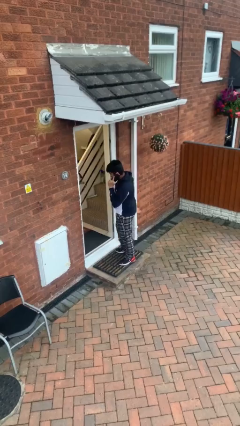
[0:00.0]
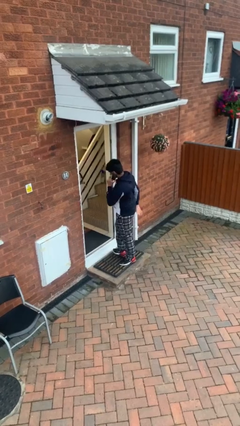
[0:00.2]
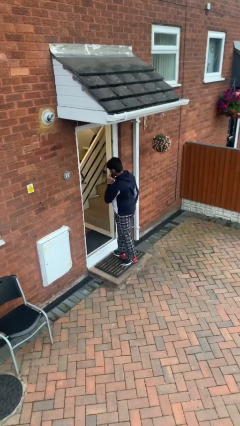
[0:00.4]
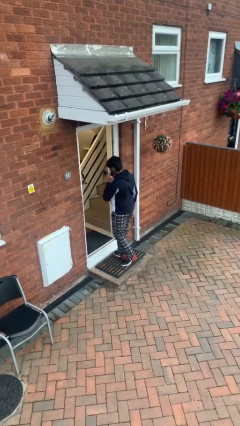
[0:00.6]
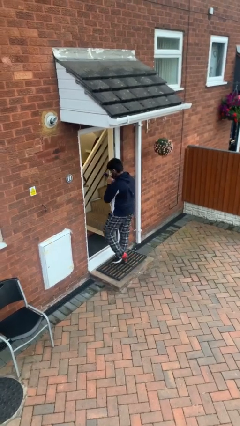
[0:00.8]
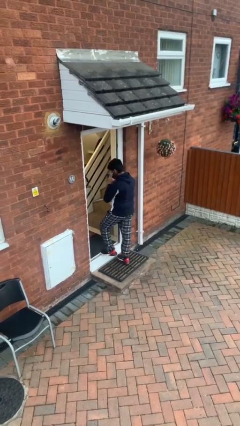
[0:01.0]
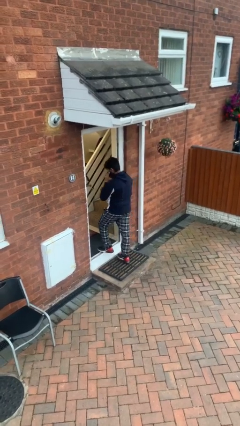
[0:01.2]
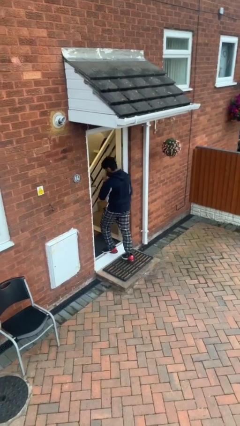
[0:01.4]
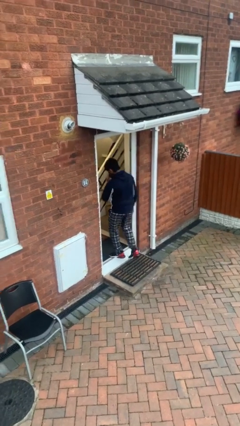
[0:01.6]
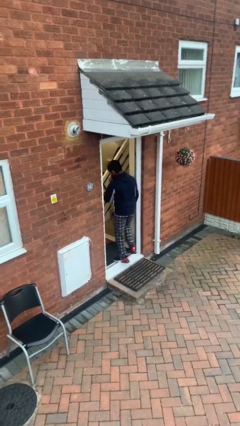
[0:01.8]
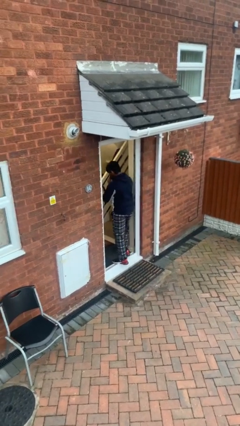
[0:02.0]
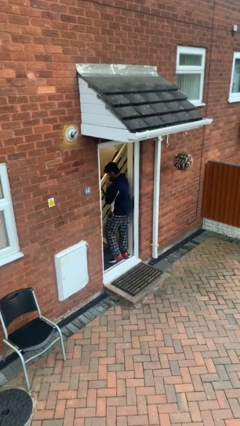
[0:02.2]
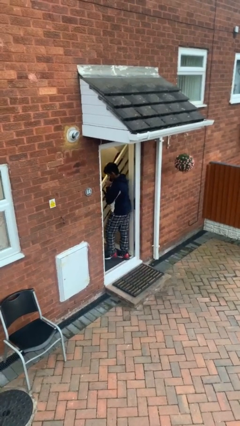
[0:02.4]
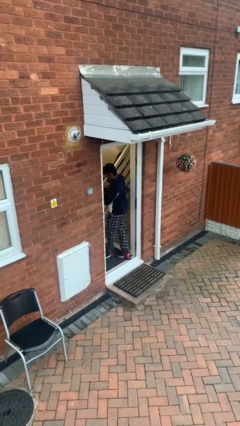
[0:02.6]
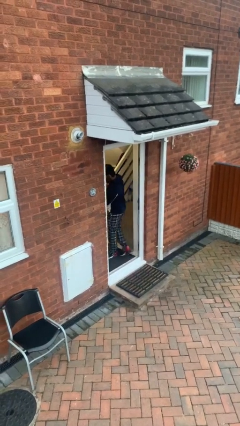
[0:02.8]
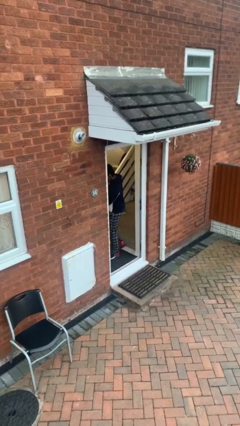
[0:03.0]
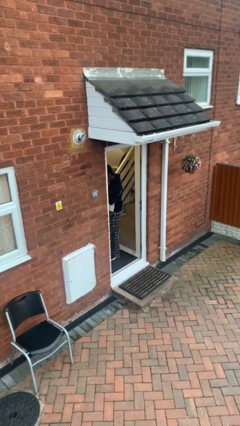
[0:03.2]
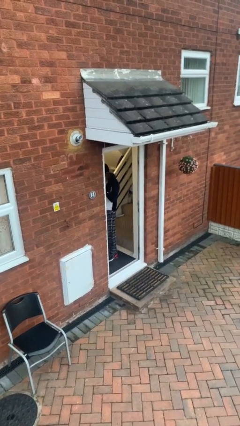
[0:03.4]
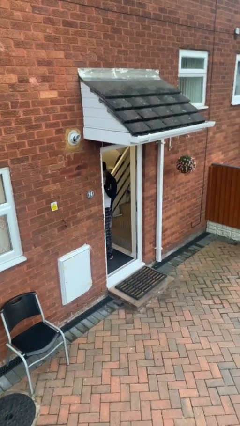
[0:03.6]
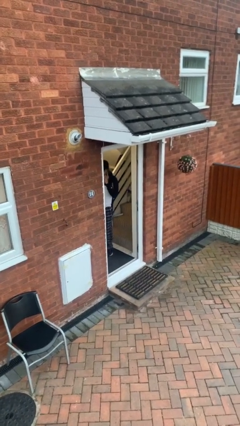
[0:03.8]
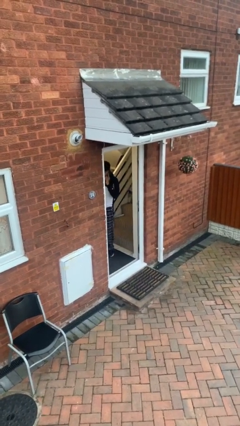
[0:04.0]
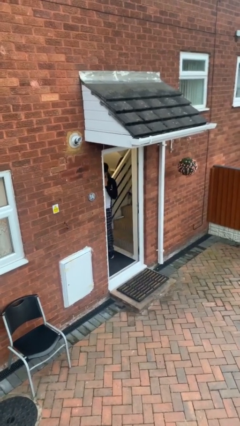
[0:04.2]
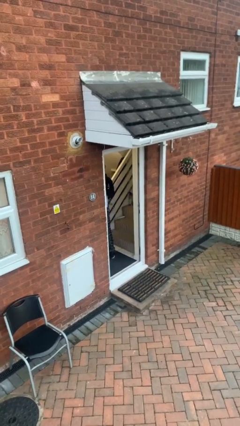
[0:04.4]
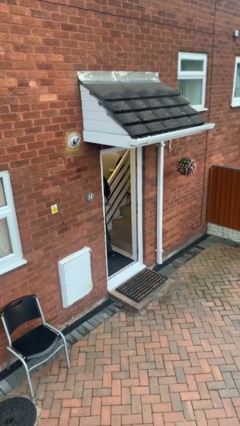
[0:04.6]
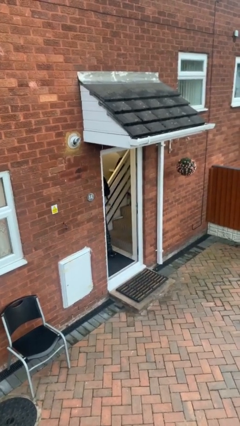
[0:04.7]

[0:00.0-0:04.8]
person exits scene through structure

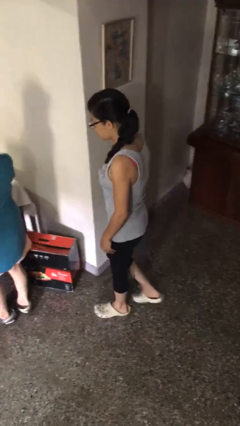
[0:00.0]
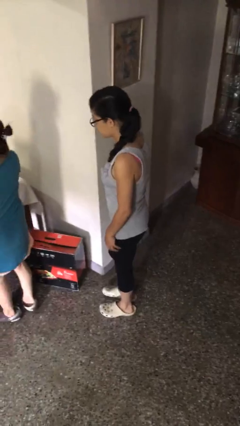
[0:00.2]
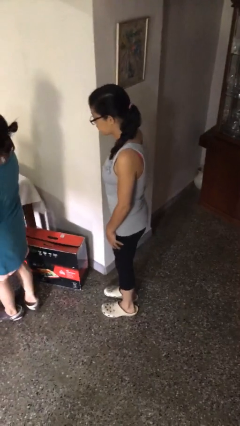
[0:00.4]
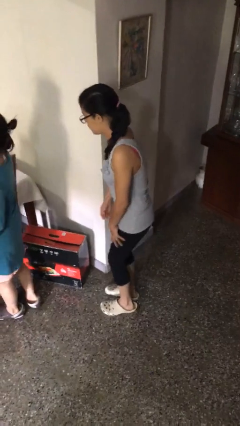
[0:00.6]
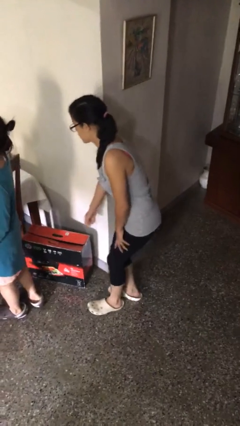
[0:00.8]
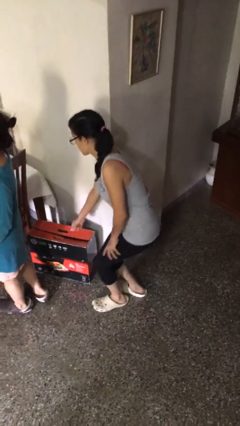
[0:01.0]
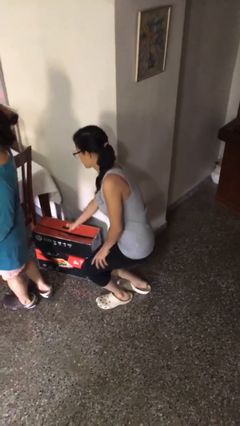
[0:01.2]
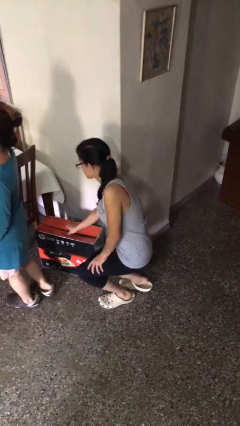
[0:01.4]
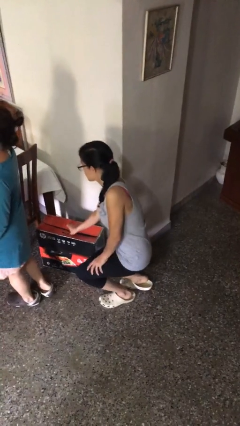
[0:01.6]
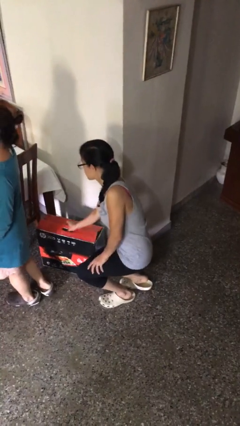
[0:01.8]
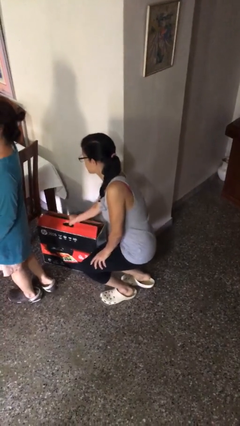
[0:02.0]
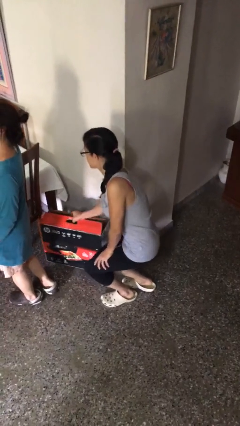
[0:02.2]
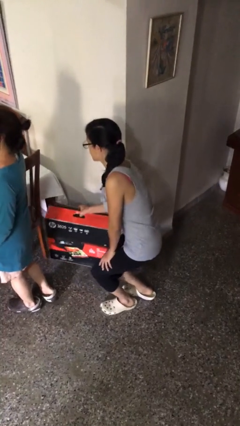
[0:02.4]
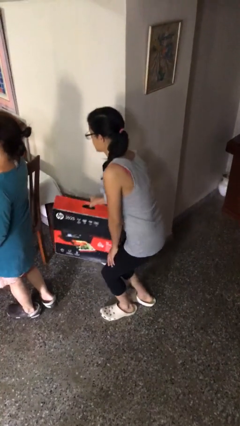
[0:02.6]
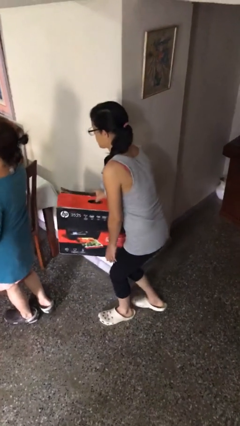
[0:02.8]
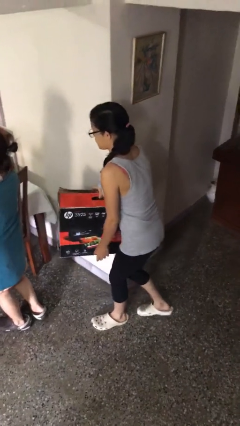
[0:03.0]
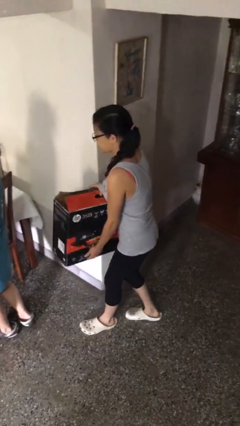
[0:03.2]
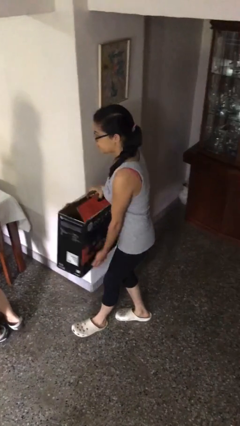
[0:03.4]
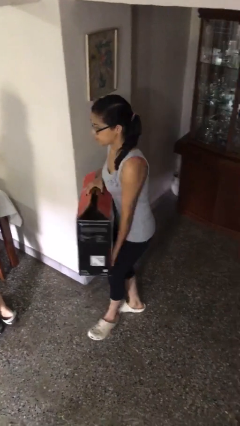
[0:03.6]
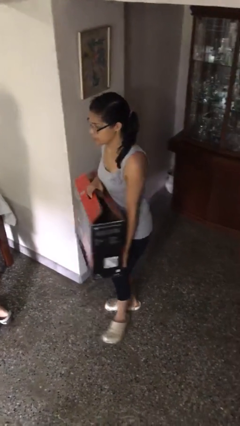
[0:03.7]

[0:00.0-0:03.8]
person steals object from person

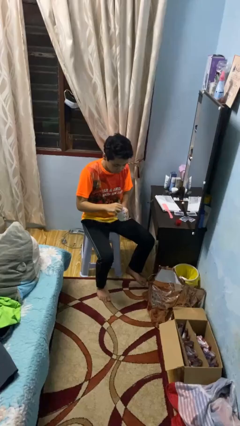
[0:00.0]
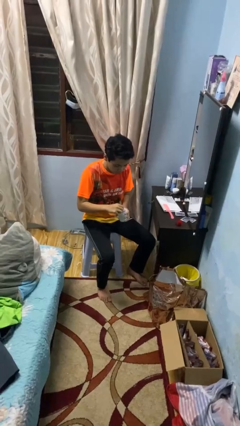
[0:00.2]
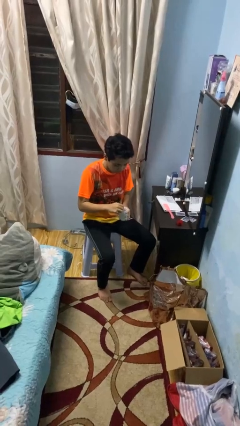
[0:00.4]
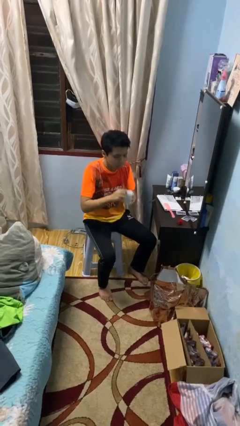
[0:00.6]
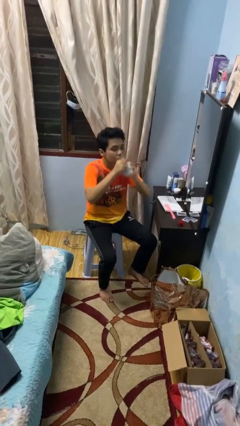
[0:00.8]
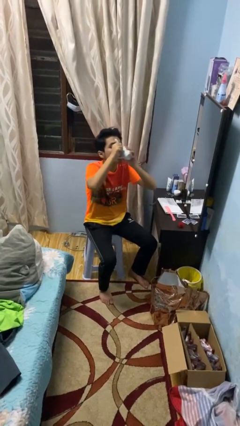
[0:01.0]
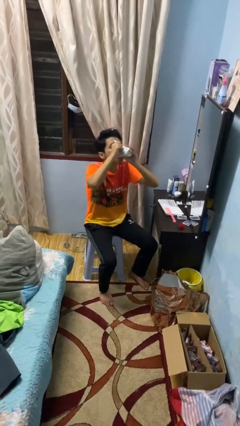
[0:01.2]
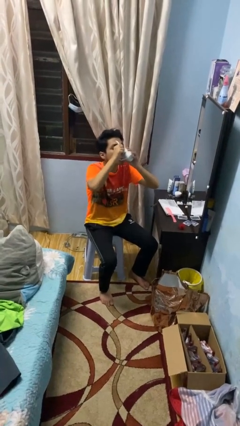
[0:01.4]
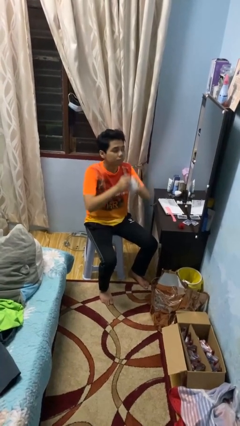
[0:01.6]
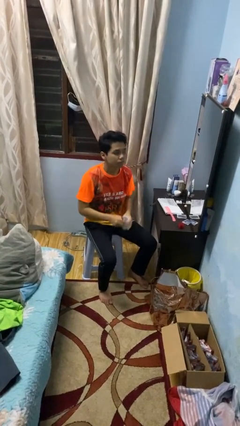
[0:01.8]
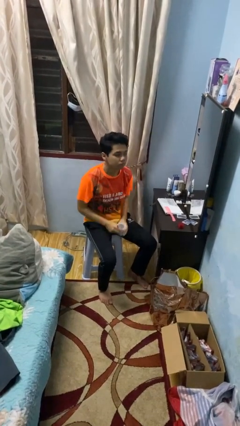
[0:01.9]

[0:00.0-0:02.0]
person drinks from mug

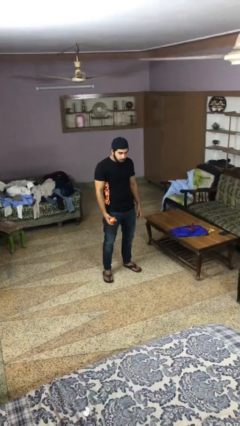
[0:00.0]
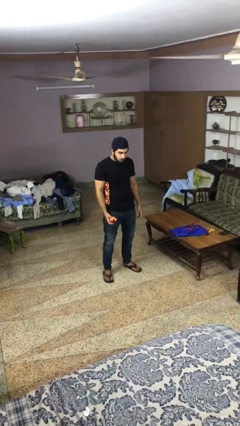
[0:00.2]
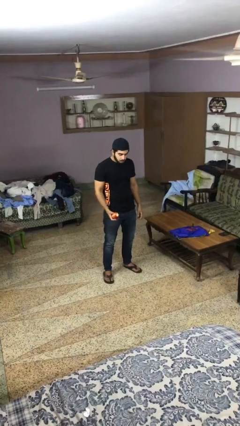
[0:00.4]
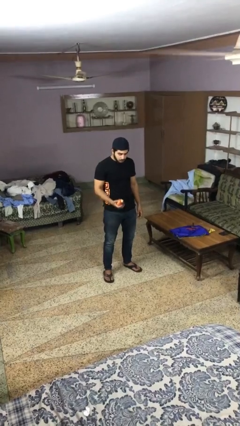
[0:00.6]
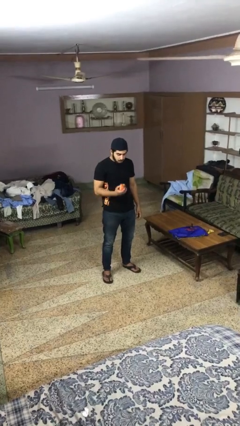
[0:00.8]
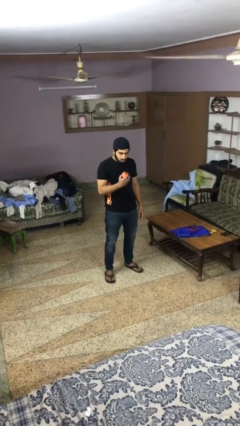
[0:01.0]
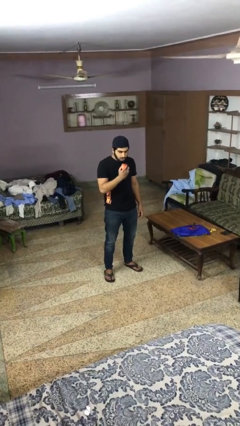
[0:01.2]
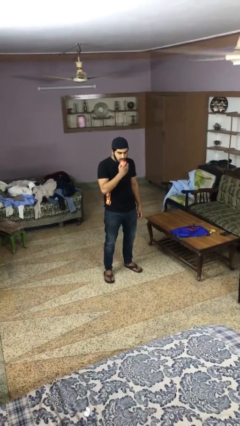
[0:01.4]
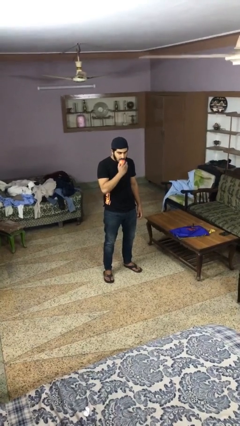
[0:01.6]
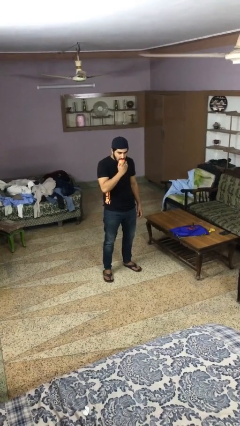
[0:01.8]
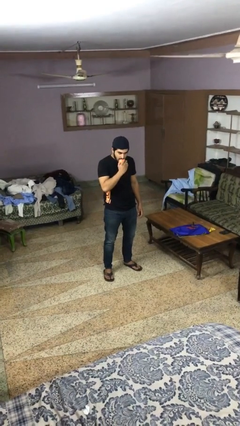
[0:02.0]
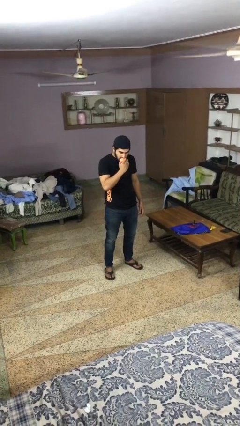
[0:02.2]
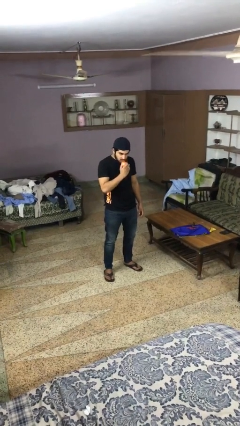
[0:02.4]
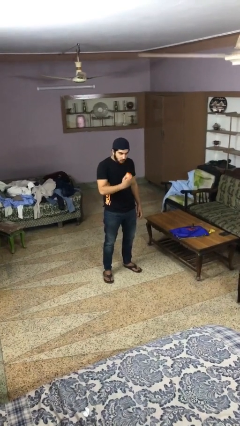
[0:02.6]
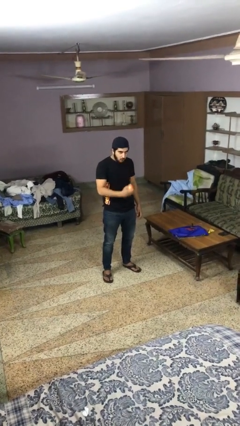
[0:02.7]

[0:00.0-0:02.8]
person eats apple

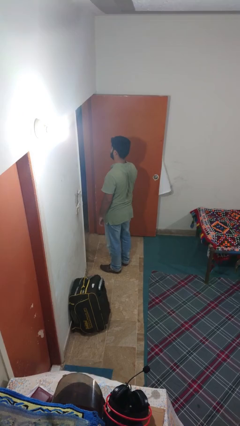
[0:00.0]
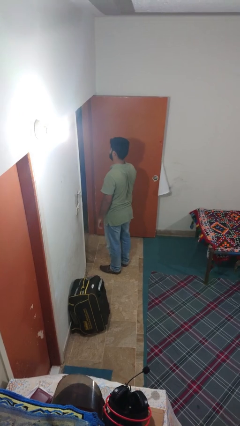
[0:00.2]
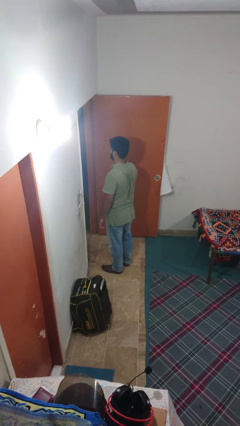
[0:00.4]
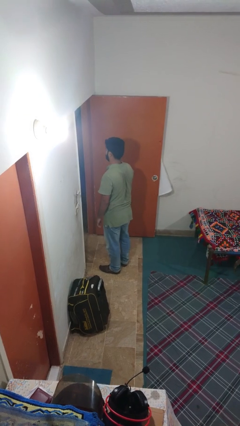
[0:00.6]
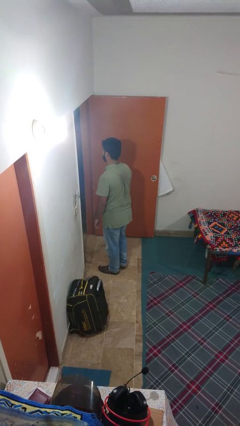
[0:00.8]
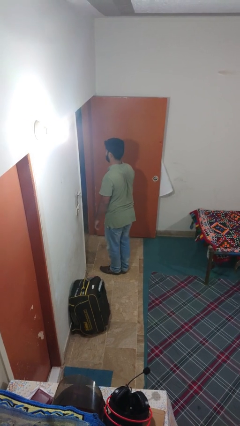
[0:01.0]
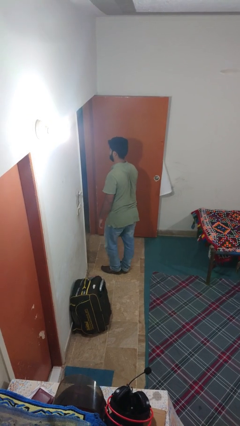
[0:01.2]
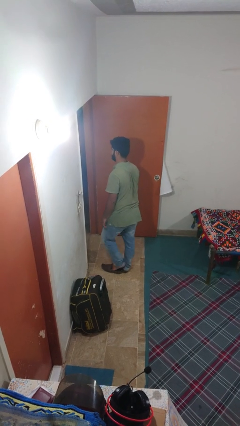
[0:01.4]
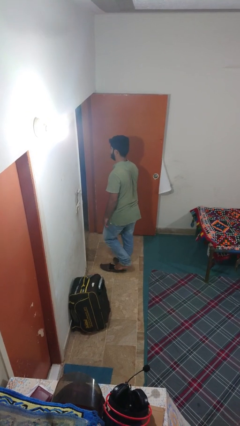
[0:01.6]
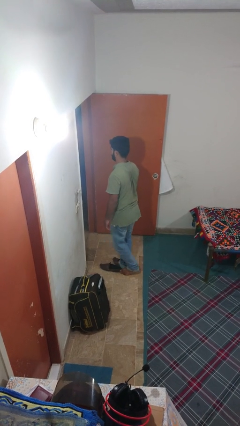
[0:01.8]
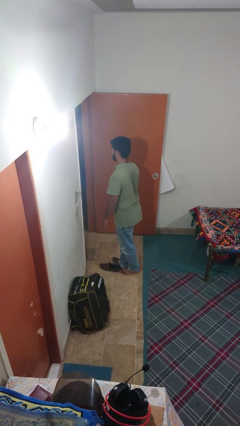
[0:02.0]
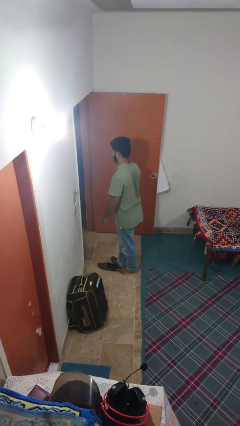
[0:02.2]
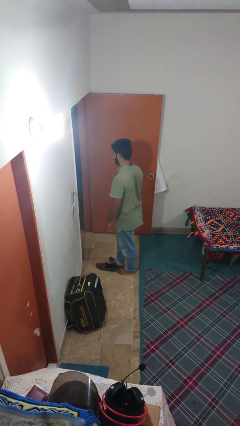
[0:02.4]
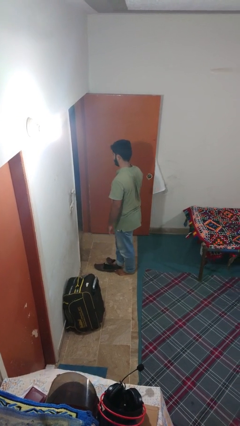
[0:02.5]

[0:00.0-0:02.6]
person takes off shoes

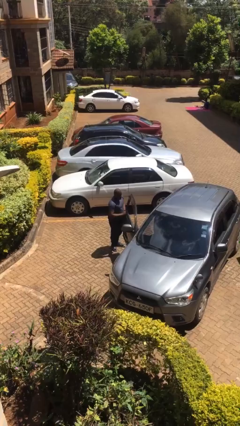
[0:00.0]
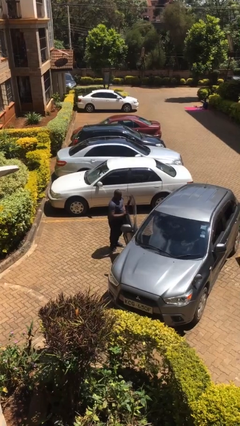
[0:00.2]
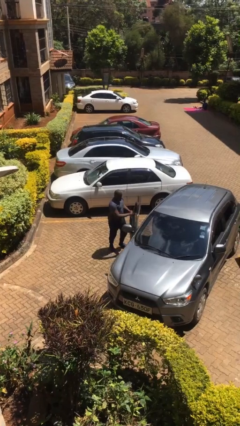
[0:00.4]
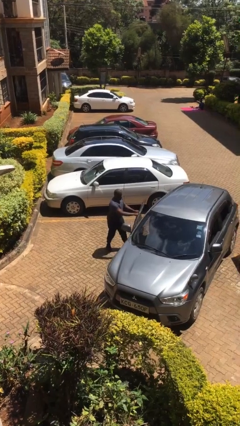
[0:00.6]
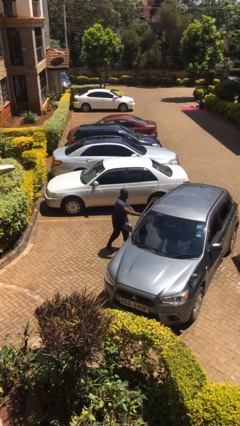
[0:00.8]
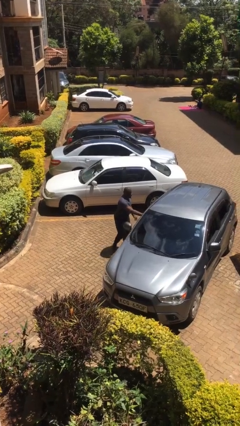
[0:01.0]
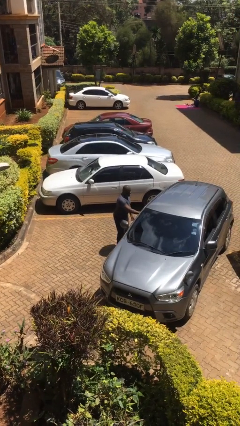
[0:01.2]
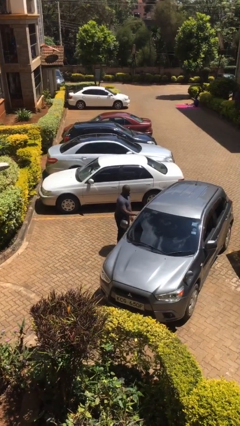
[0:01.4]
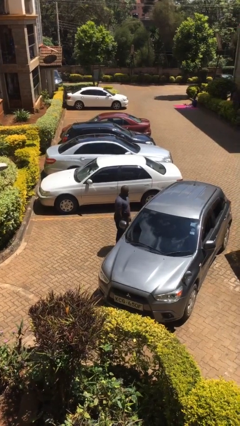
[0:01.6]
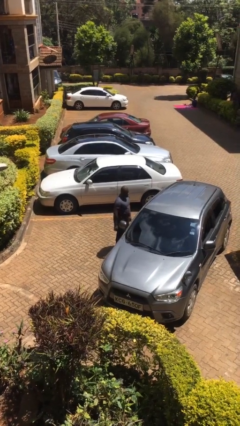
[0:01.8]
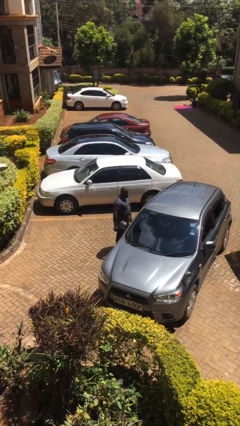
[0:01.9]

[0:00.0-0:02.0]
person closes car door
